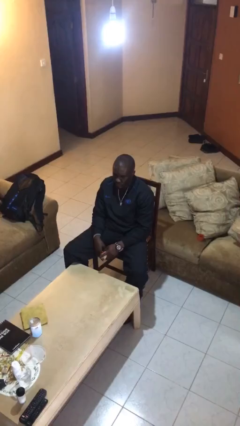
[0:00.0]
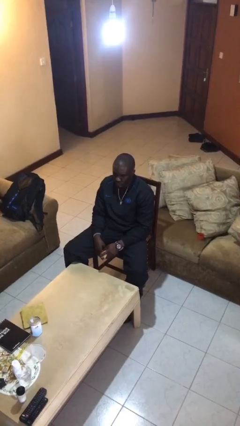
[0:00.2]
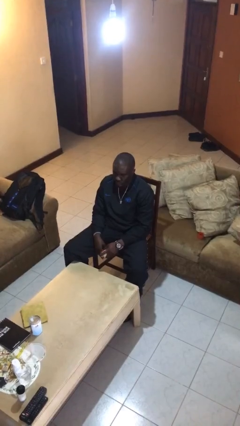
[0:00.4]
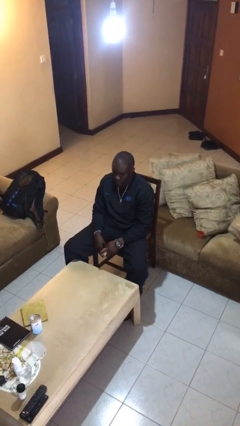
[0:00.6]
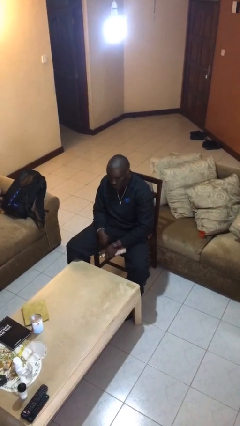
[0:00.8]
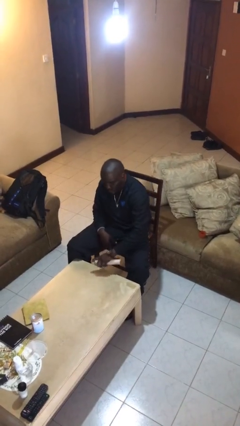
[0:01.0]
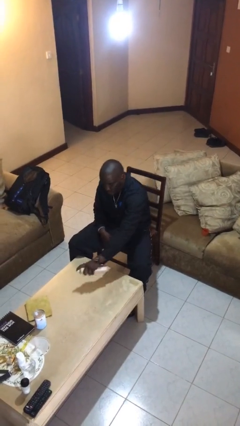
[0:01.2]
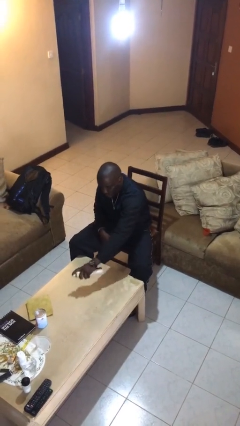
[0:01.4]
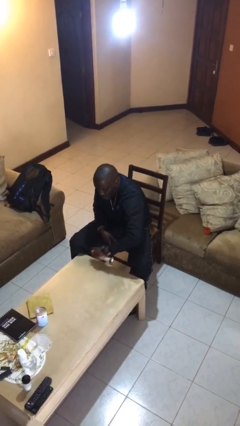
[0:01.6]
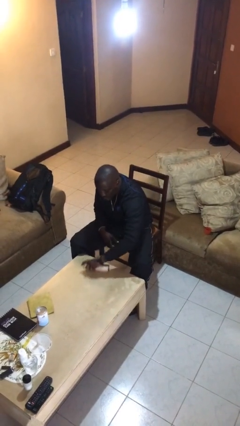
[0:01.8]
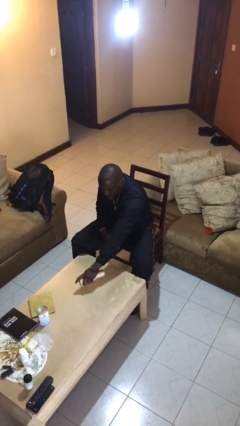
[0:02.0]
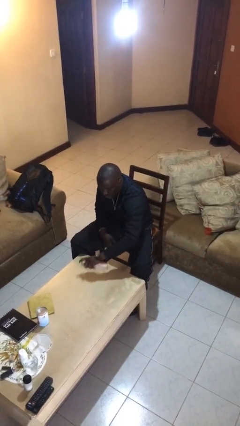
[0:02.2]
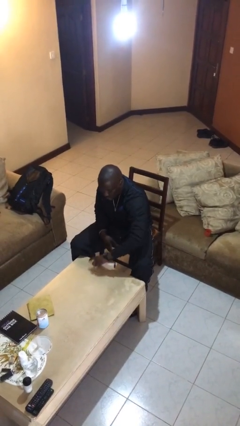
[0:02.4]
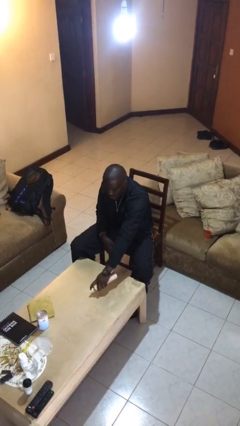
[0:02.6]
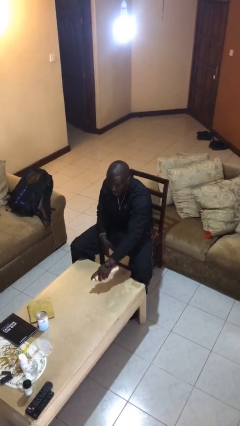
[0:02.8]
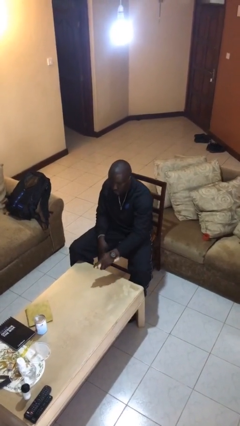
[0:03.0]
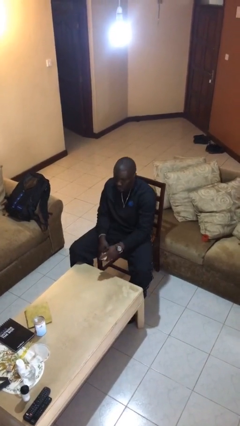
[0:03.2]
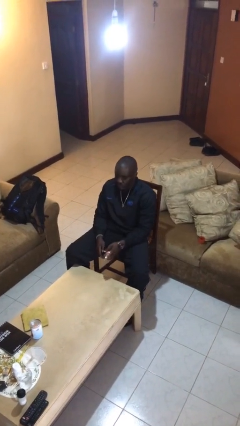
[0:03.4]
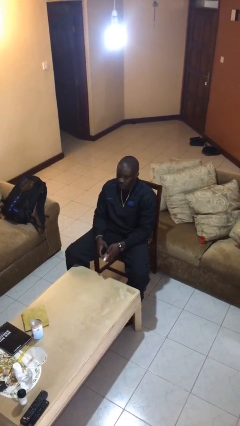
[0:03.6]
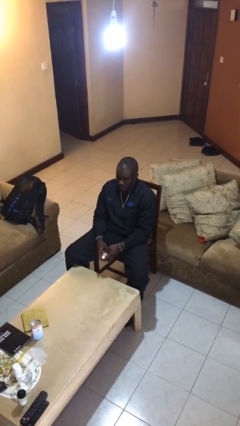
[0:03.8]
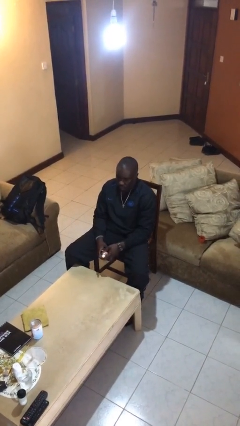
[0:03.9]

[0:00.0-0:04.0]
person sprays from bottle

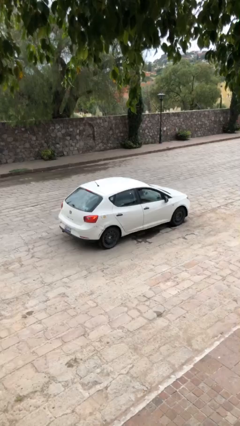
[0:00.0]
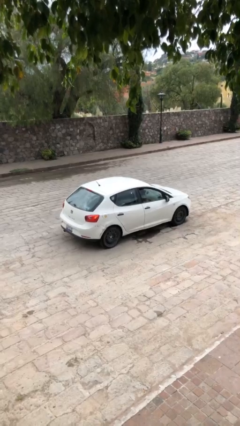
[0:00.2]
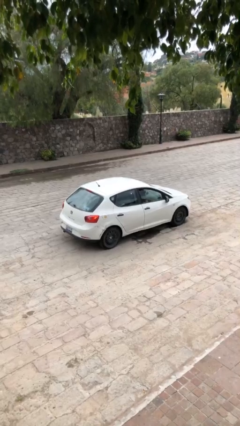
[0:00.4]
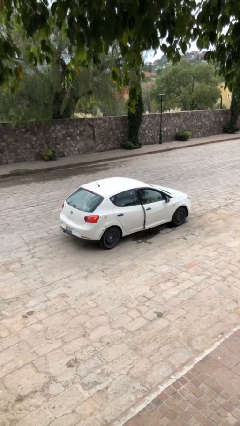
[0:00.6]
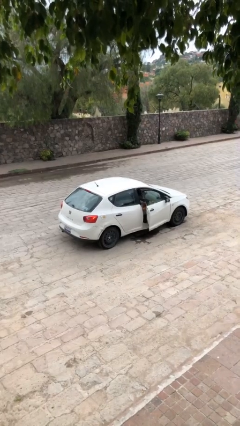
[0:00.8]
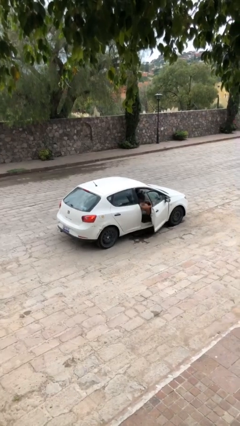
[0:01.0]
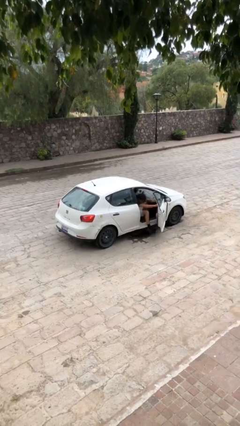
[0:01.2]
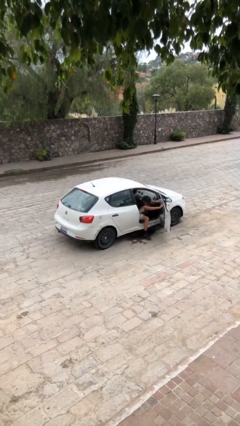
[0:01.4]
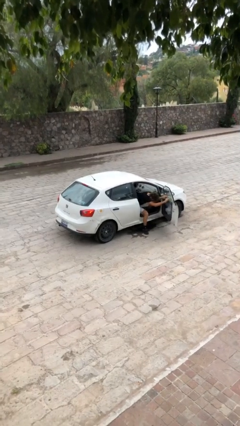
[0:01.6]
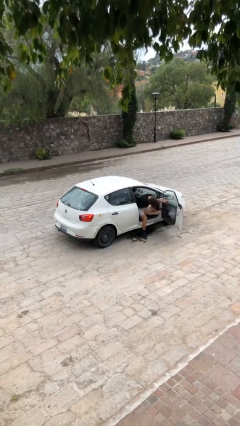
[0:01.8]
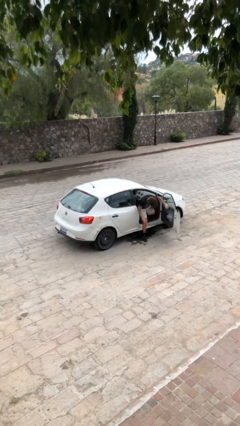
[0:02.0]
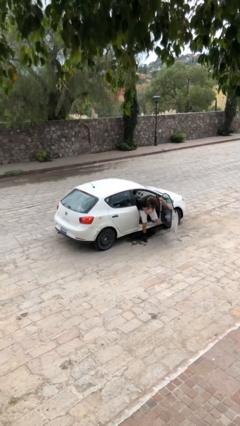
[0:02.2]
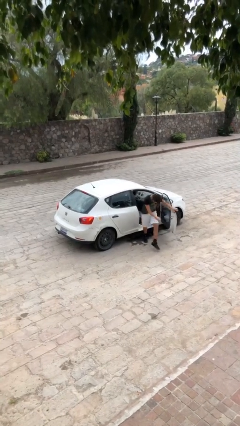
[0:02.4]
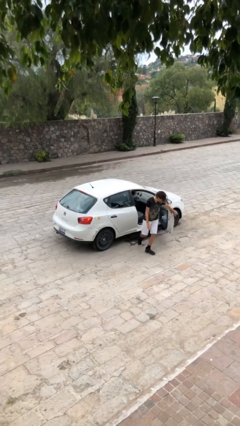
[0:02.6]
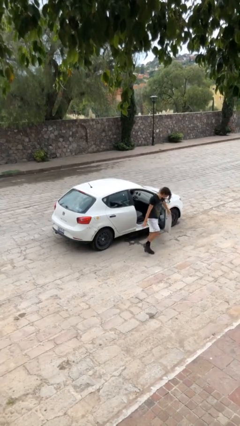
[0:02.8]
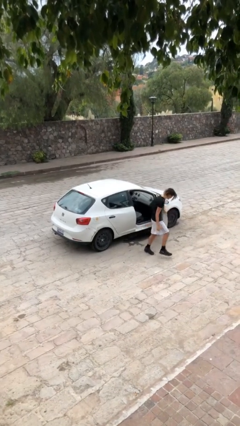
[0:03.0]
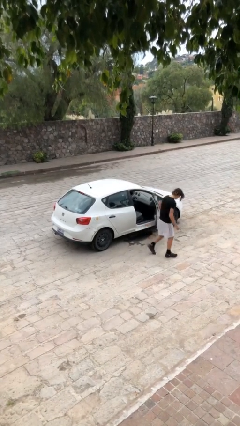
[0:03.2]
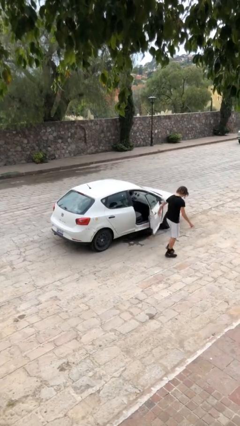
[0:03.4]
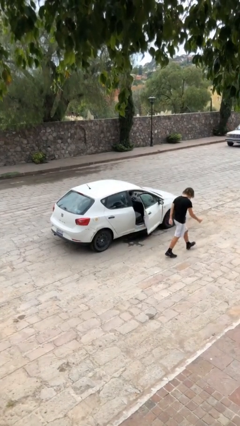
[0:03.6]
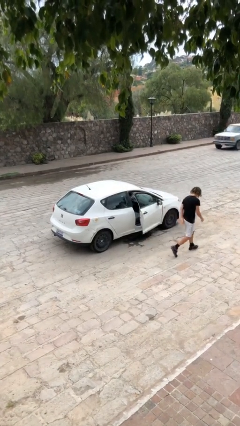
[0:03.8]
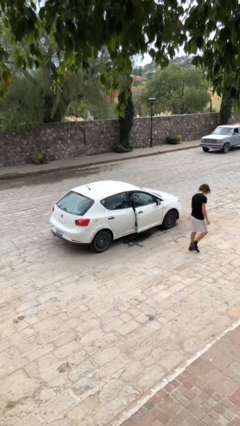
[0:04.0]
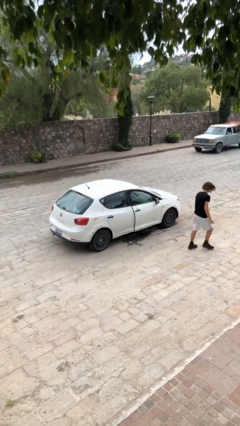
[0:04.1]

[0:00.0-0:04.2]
car drops off person

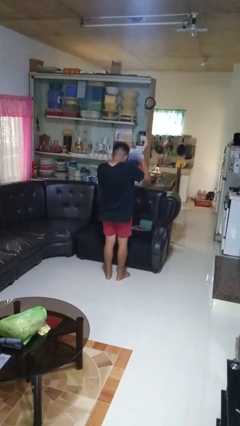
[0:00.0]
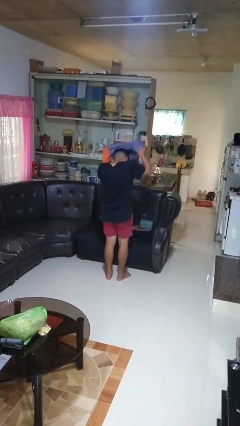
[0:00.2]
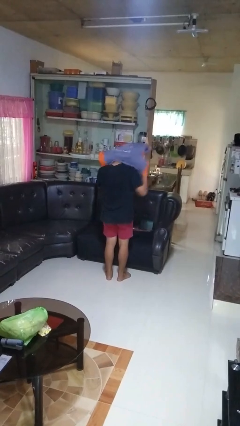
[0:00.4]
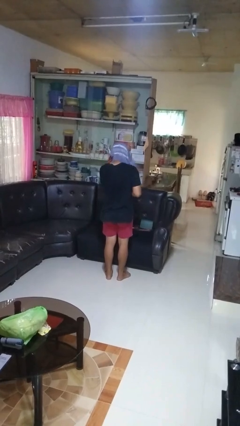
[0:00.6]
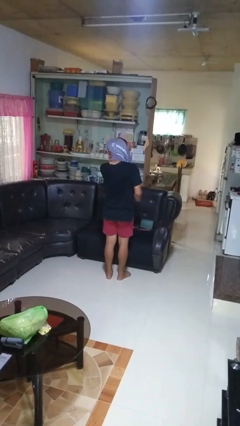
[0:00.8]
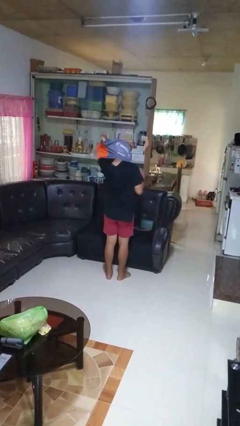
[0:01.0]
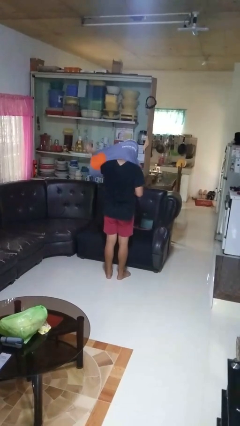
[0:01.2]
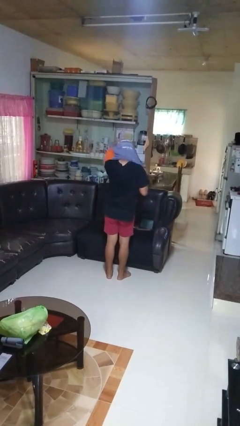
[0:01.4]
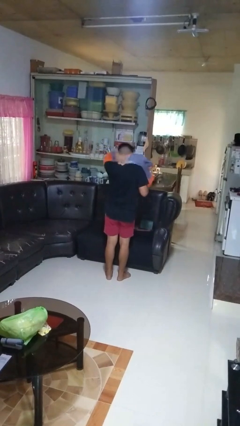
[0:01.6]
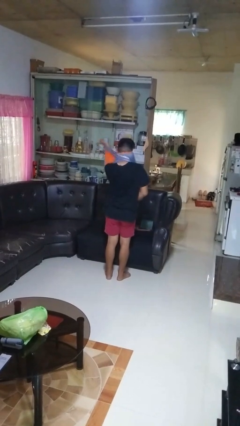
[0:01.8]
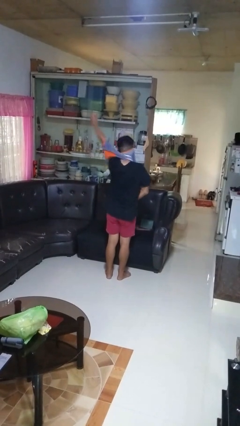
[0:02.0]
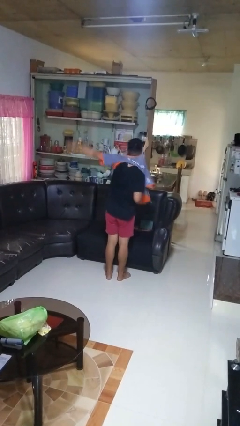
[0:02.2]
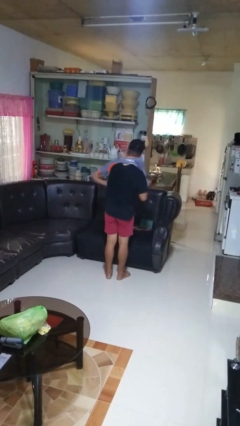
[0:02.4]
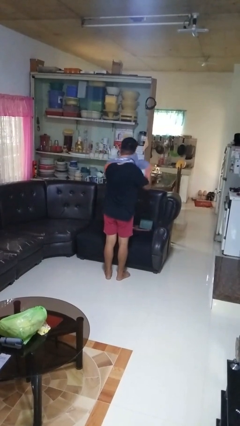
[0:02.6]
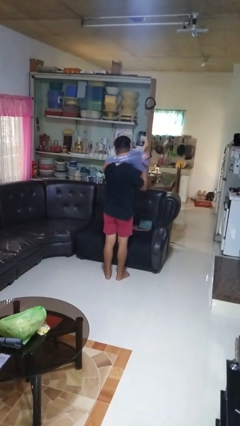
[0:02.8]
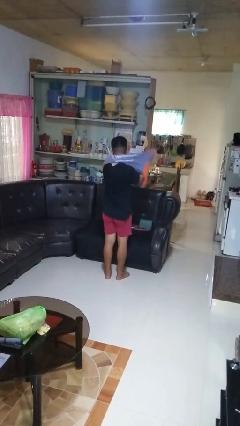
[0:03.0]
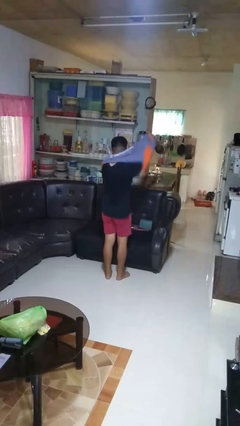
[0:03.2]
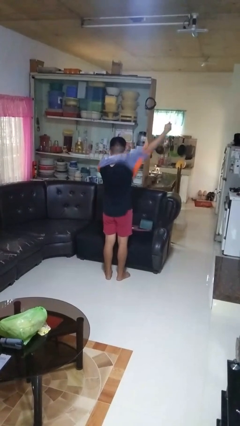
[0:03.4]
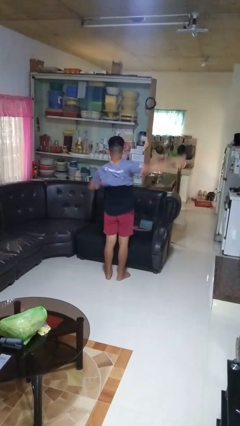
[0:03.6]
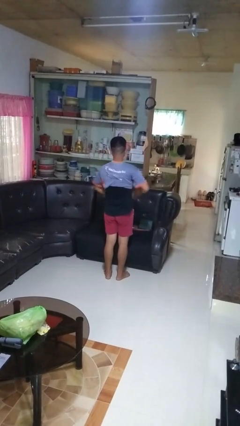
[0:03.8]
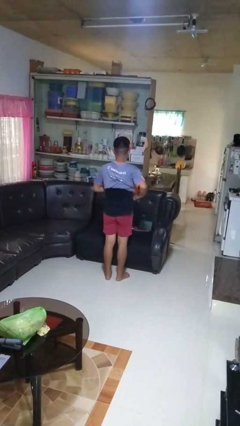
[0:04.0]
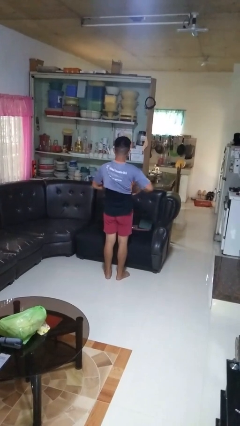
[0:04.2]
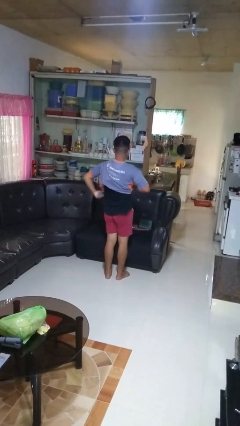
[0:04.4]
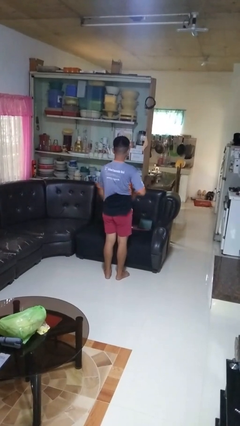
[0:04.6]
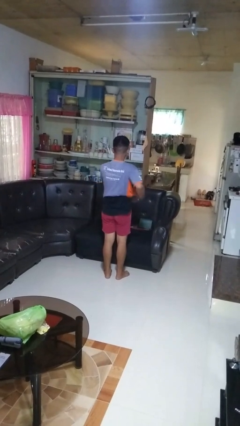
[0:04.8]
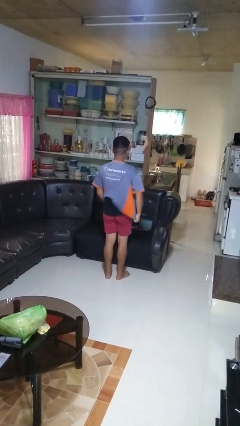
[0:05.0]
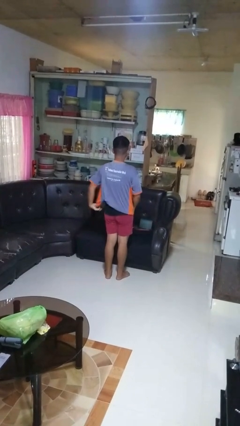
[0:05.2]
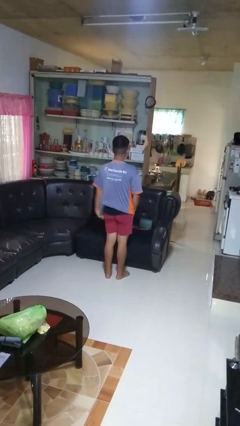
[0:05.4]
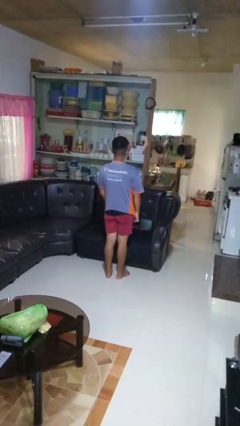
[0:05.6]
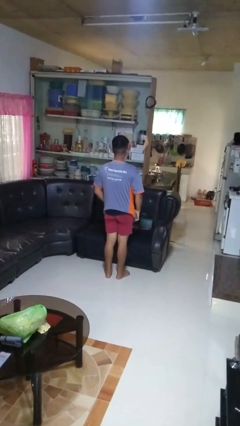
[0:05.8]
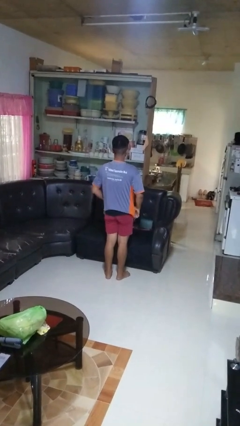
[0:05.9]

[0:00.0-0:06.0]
person puts on shirt

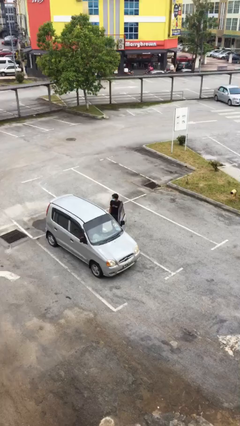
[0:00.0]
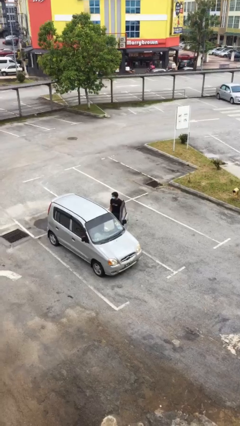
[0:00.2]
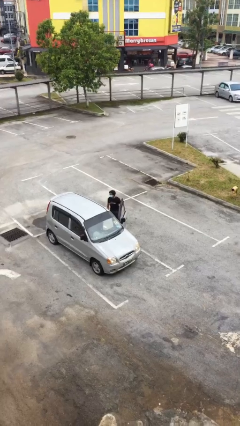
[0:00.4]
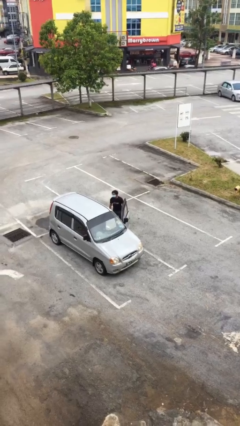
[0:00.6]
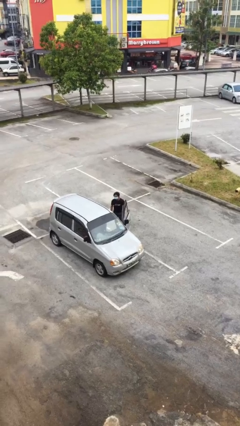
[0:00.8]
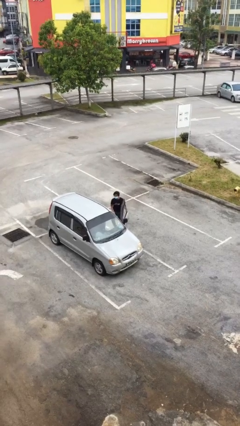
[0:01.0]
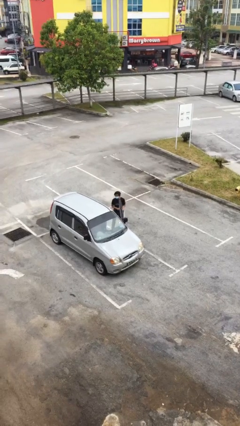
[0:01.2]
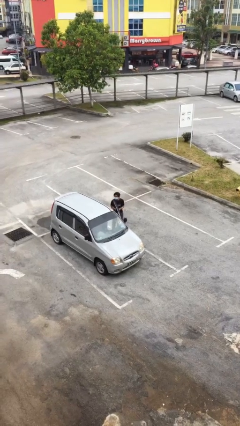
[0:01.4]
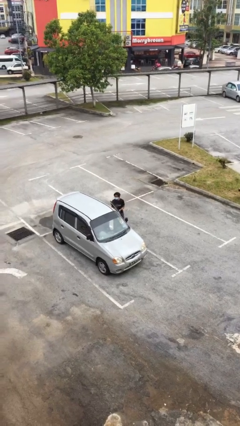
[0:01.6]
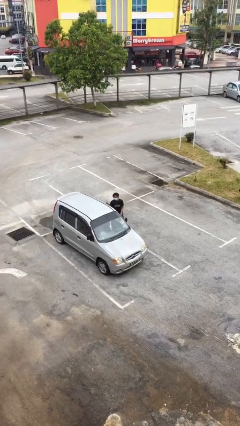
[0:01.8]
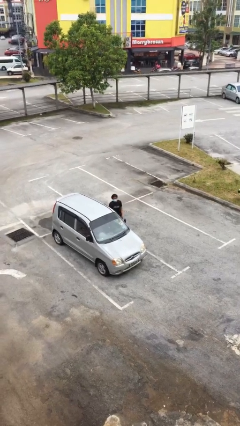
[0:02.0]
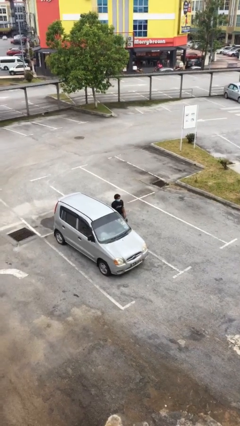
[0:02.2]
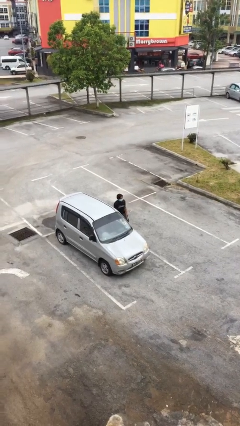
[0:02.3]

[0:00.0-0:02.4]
person closes car door

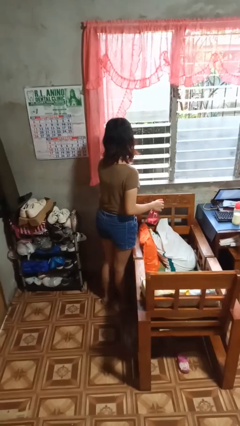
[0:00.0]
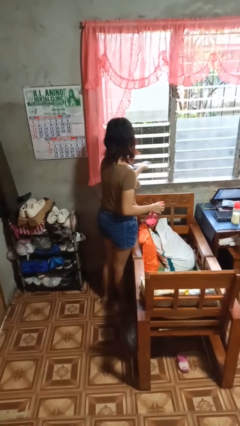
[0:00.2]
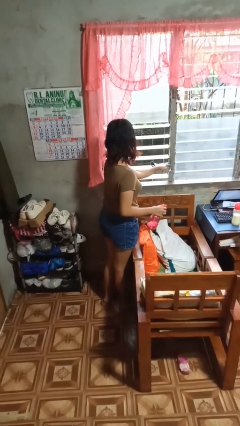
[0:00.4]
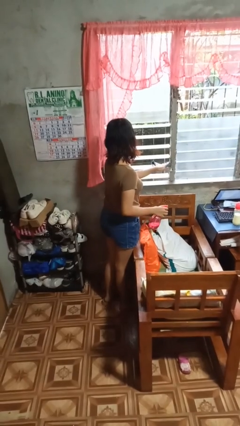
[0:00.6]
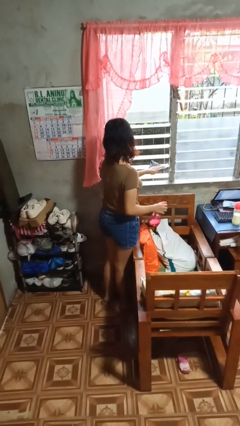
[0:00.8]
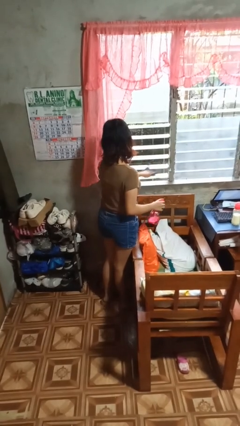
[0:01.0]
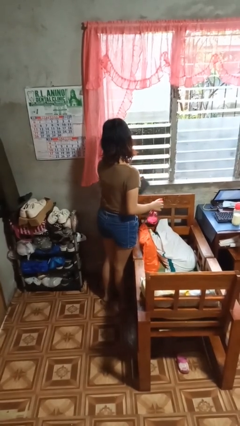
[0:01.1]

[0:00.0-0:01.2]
person washes window
